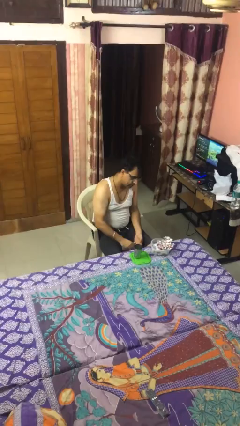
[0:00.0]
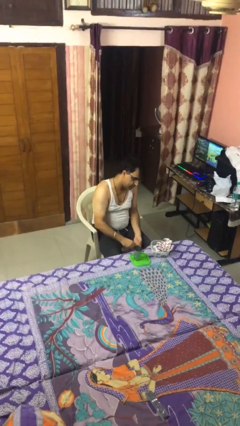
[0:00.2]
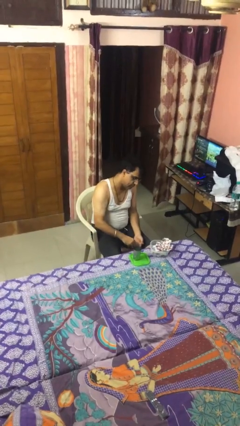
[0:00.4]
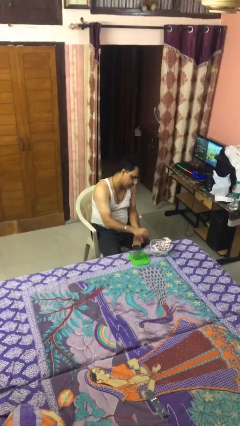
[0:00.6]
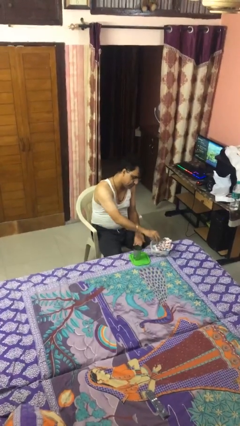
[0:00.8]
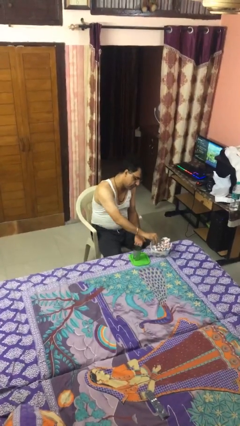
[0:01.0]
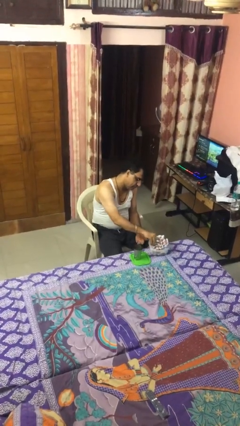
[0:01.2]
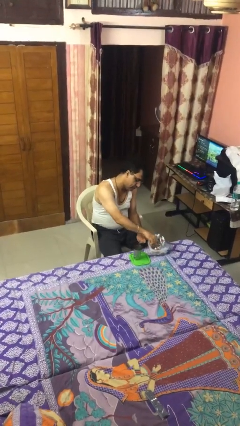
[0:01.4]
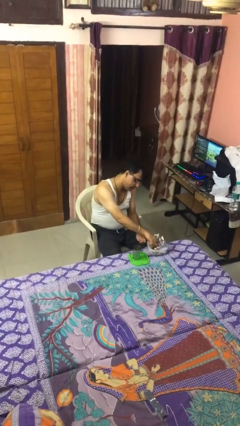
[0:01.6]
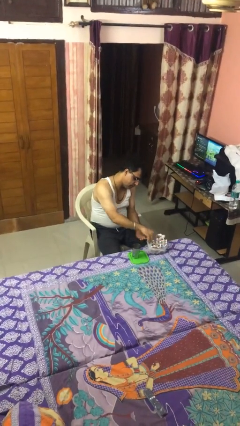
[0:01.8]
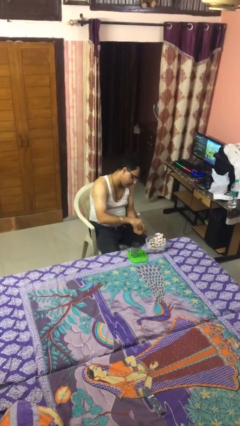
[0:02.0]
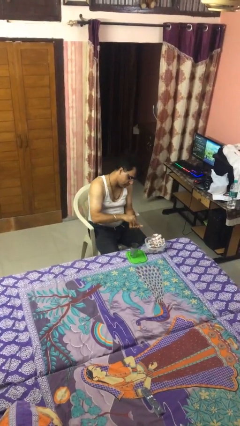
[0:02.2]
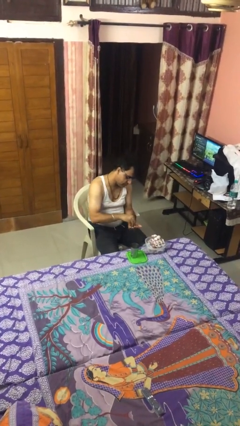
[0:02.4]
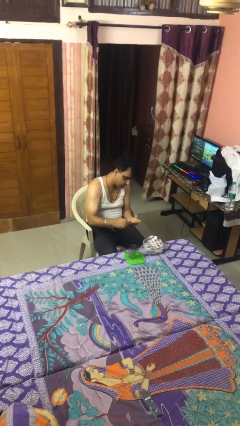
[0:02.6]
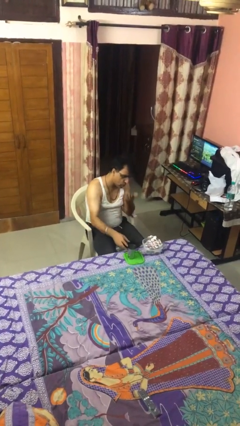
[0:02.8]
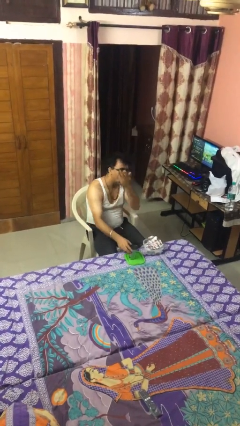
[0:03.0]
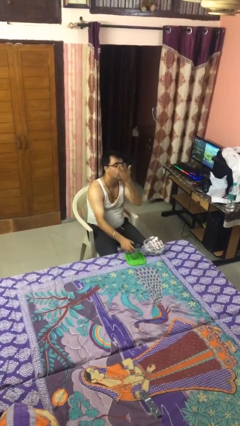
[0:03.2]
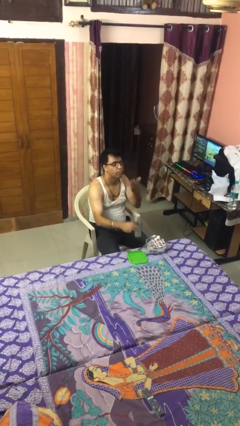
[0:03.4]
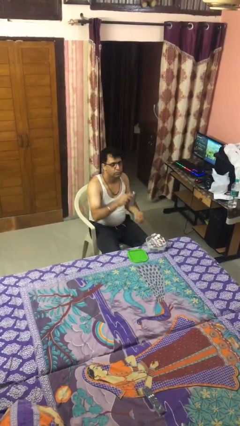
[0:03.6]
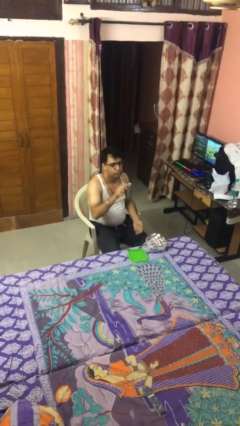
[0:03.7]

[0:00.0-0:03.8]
person takes medicine pills

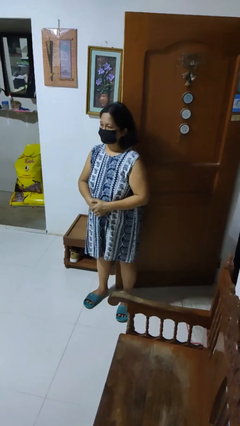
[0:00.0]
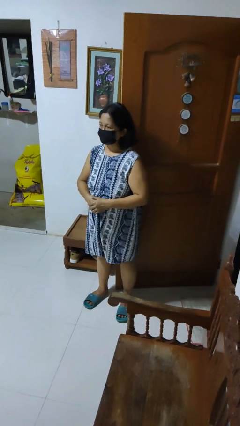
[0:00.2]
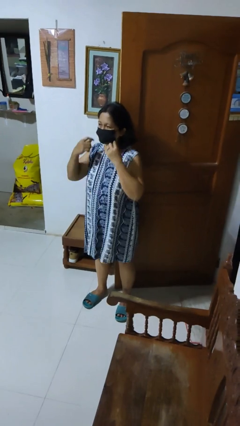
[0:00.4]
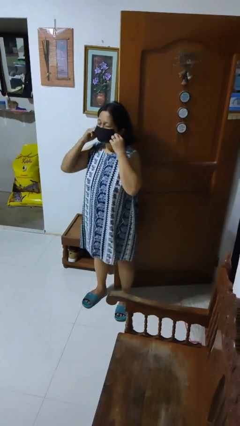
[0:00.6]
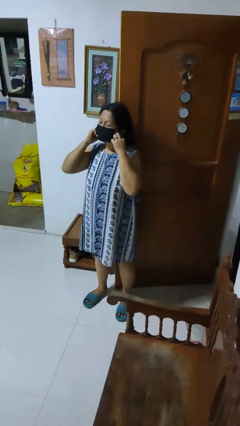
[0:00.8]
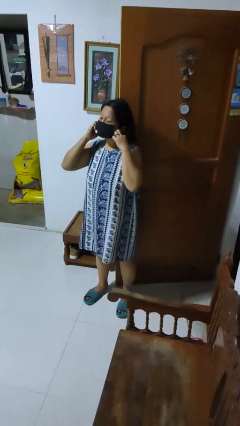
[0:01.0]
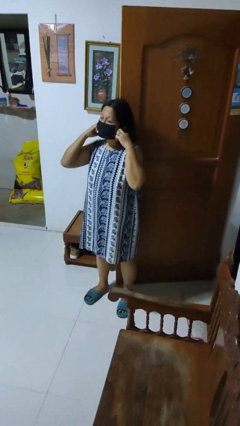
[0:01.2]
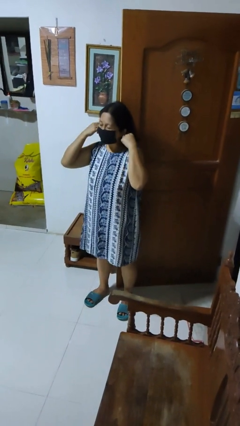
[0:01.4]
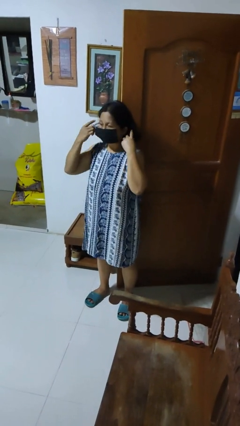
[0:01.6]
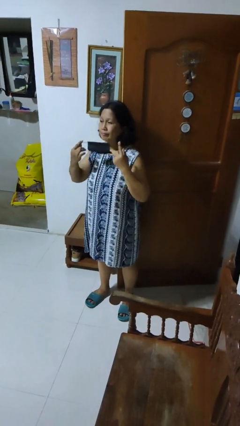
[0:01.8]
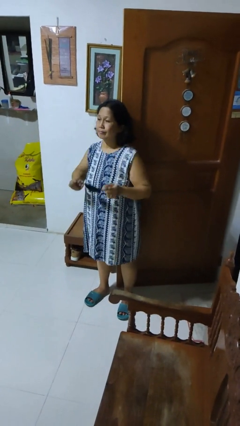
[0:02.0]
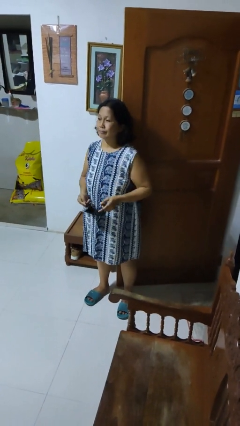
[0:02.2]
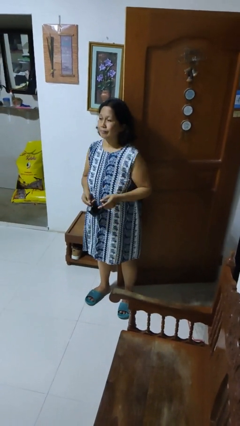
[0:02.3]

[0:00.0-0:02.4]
person takes off facemask

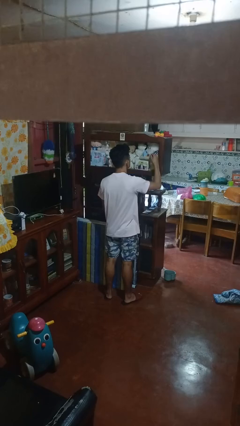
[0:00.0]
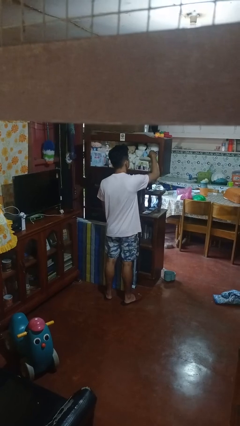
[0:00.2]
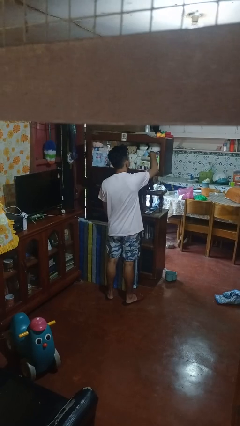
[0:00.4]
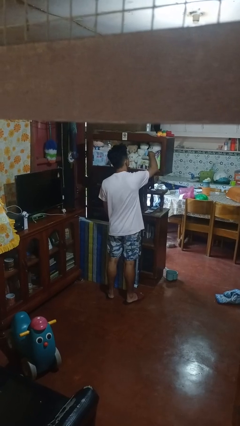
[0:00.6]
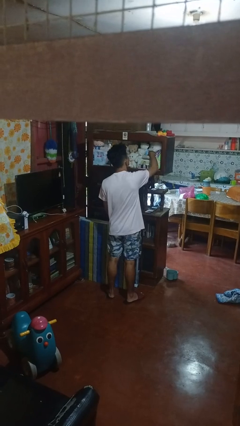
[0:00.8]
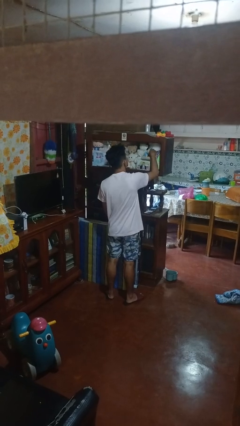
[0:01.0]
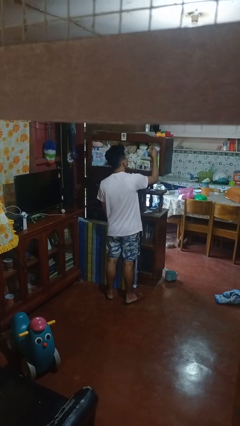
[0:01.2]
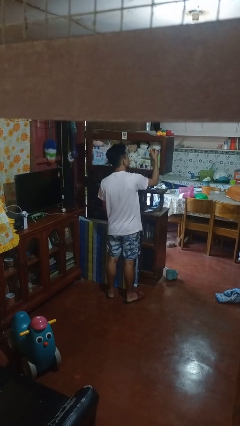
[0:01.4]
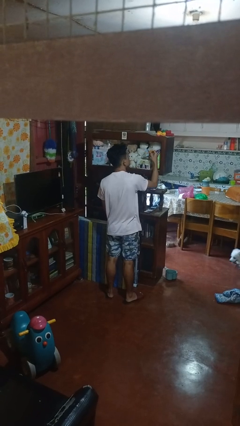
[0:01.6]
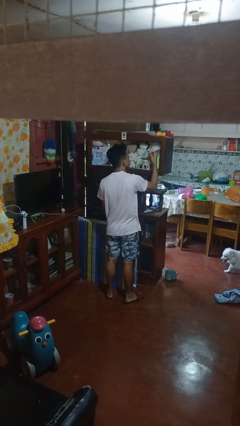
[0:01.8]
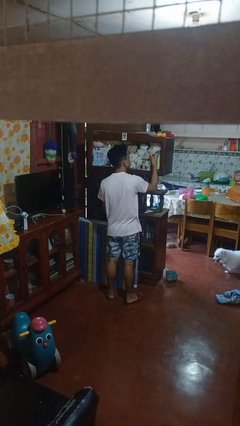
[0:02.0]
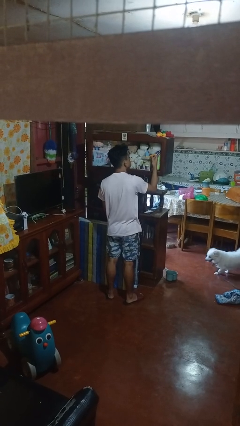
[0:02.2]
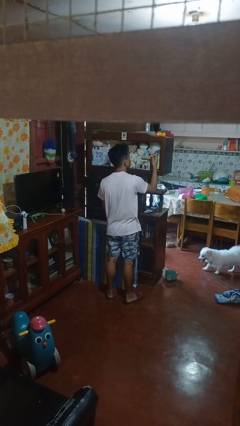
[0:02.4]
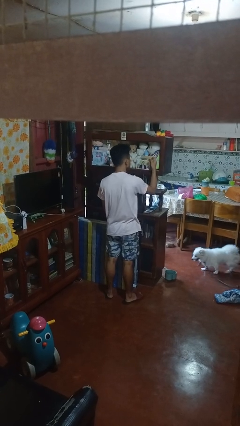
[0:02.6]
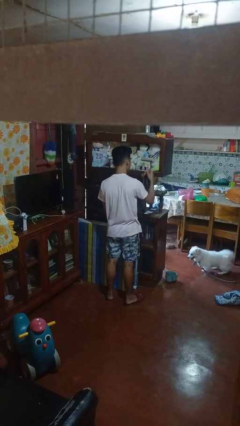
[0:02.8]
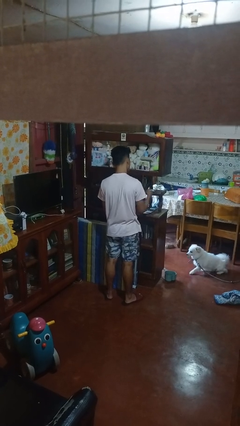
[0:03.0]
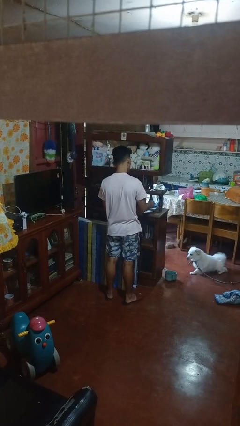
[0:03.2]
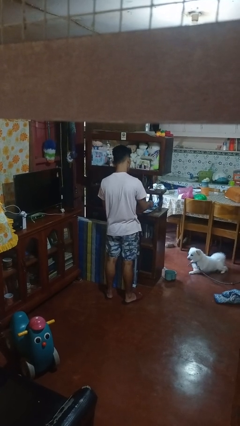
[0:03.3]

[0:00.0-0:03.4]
person picks up object from shelf

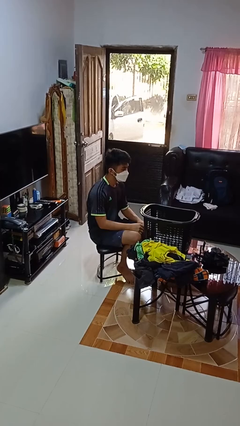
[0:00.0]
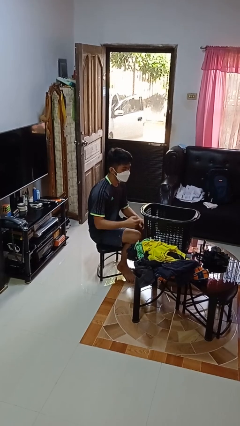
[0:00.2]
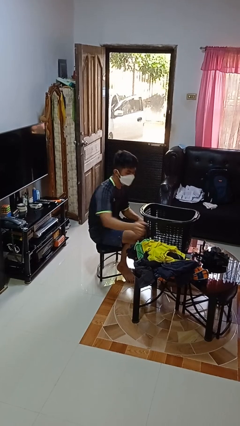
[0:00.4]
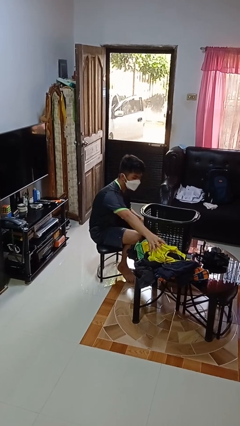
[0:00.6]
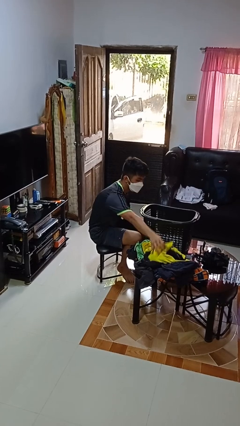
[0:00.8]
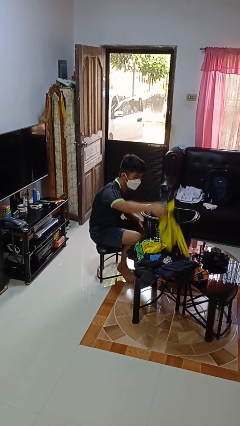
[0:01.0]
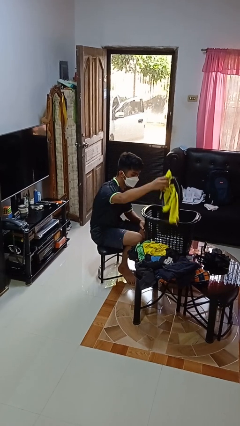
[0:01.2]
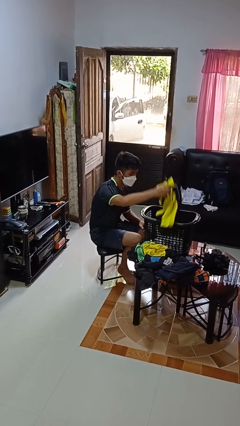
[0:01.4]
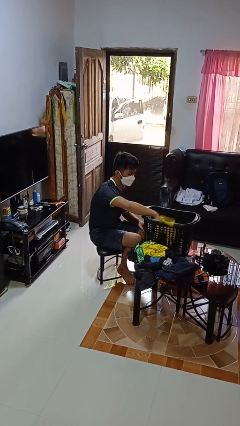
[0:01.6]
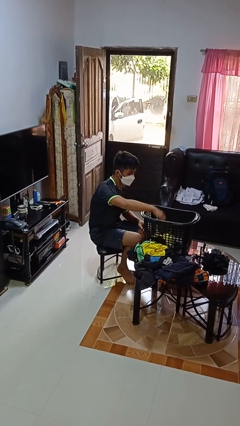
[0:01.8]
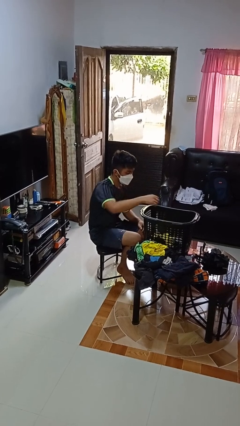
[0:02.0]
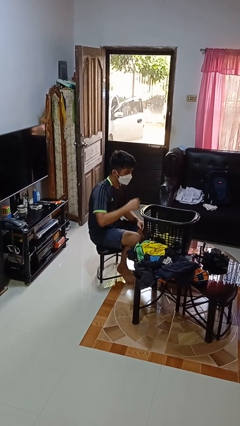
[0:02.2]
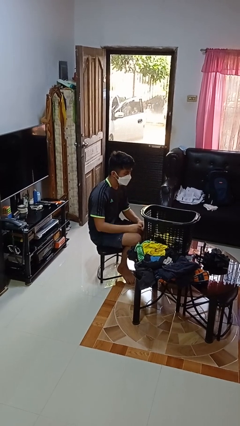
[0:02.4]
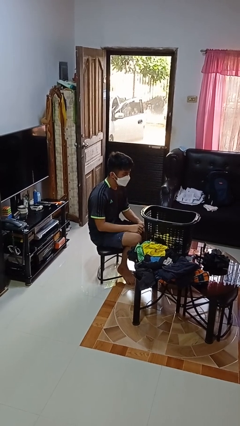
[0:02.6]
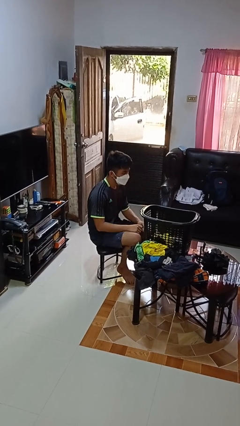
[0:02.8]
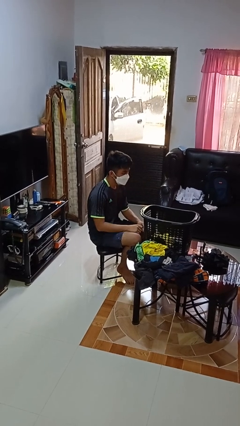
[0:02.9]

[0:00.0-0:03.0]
person puts object into basket

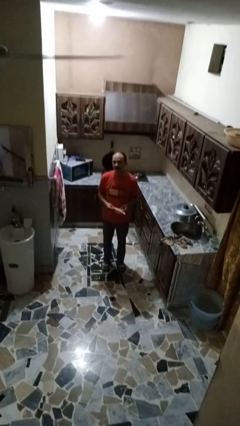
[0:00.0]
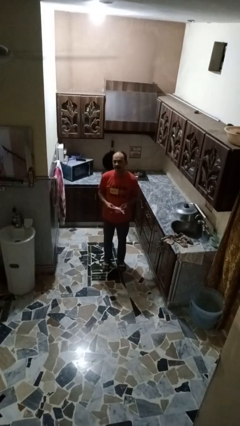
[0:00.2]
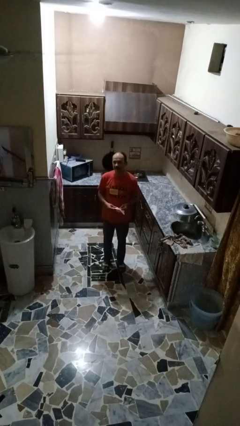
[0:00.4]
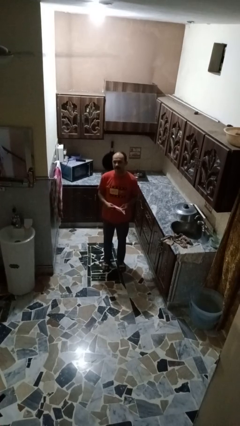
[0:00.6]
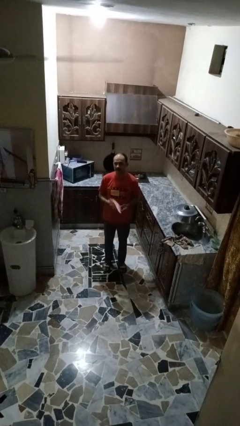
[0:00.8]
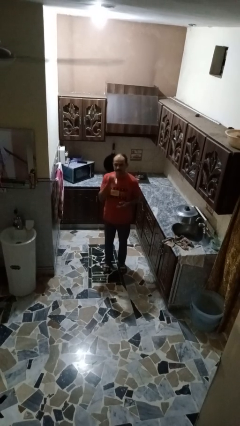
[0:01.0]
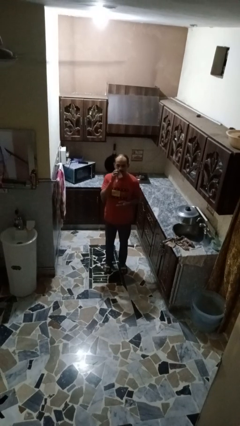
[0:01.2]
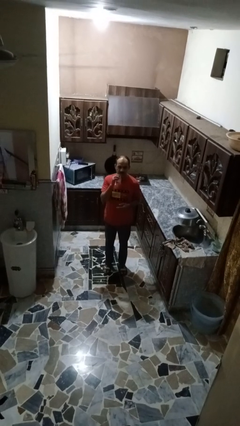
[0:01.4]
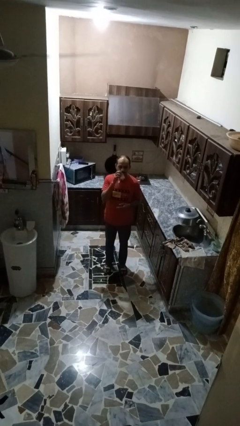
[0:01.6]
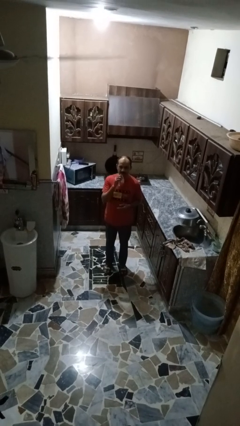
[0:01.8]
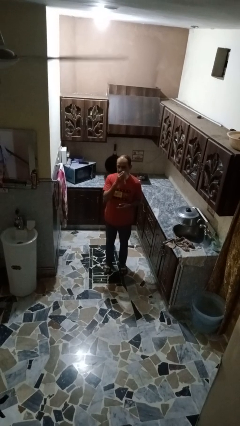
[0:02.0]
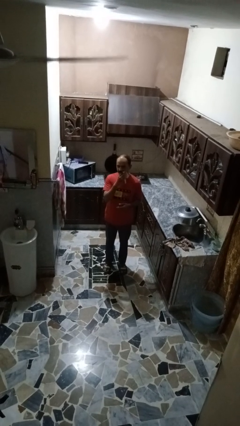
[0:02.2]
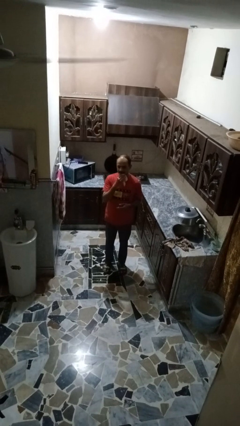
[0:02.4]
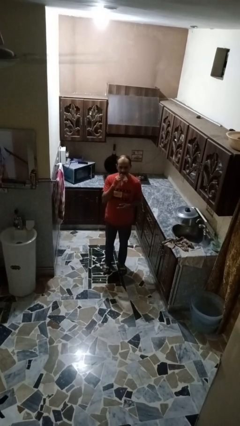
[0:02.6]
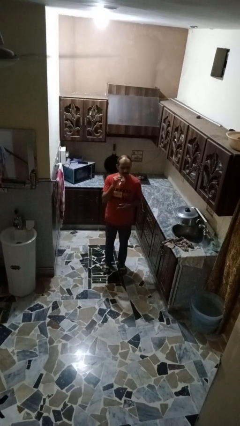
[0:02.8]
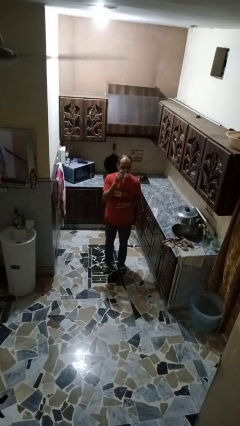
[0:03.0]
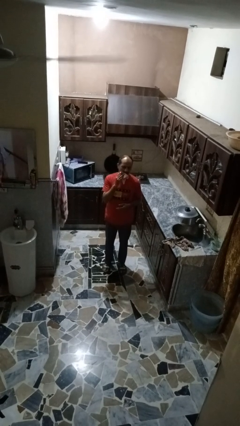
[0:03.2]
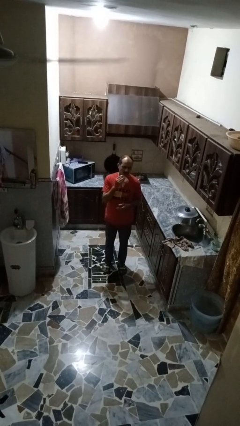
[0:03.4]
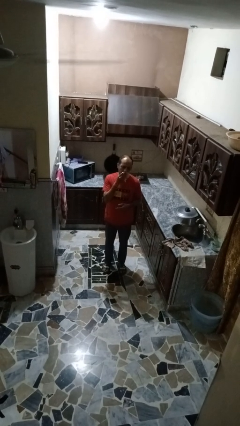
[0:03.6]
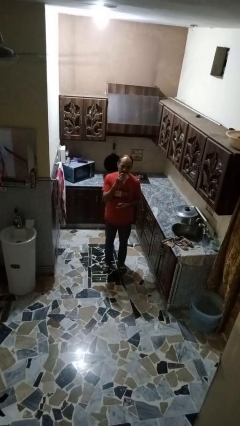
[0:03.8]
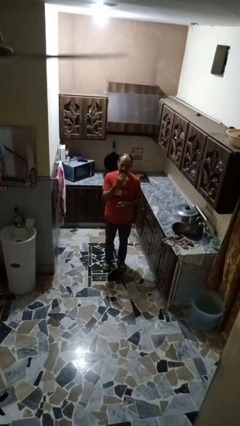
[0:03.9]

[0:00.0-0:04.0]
person wipes mouth with napkin

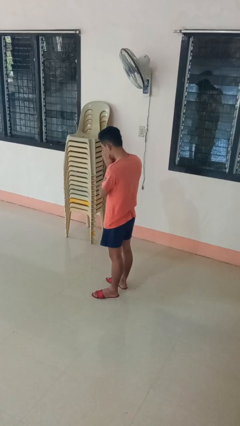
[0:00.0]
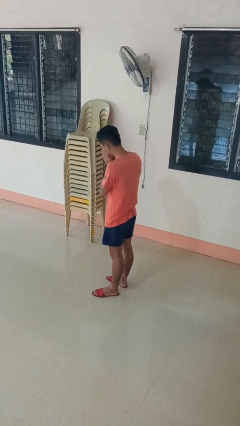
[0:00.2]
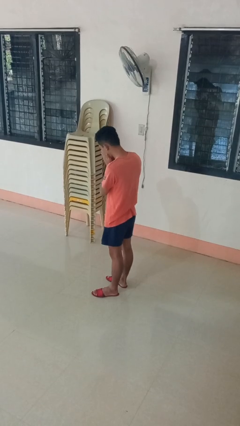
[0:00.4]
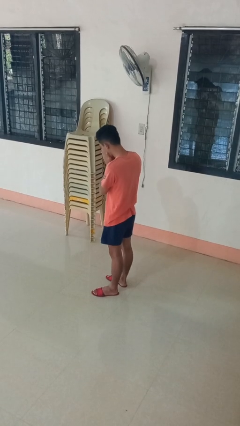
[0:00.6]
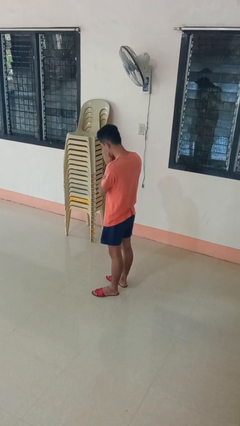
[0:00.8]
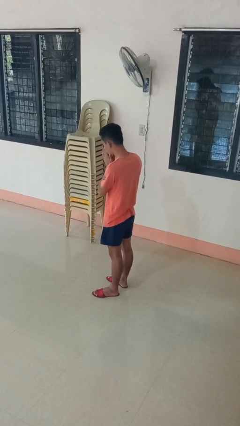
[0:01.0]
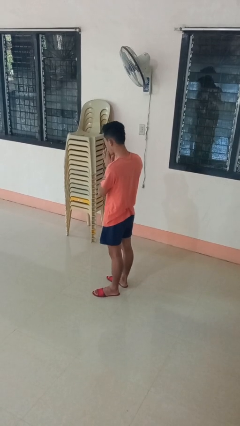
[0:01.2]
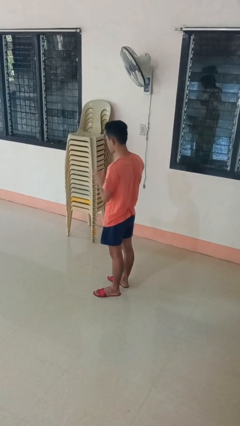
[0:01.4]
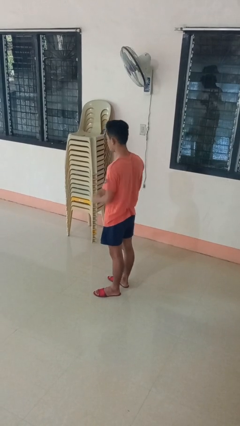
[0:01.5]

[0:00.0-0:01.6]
person sneezes into hand
